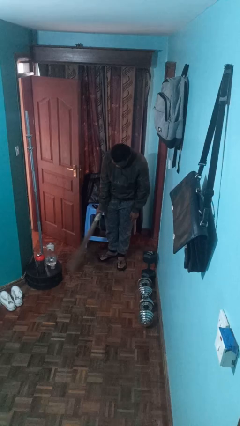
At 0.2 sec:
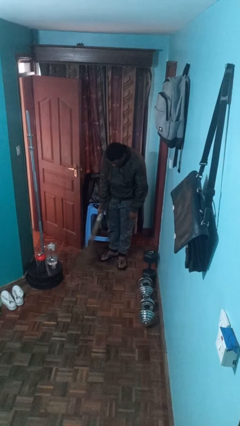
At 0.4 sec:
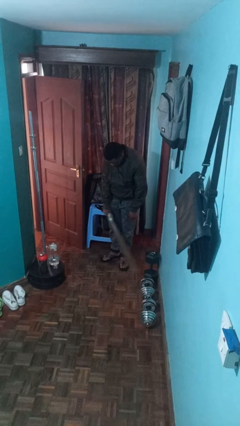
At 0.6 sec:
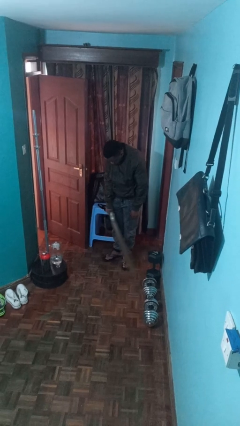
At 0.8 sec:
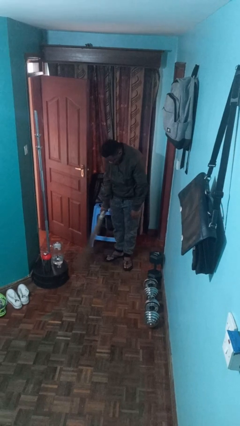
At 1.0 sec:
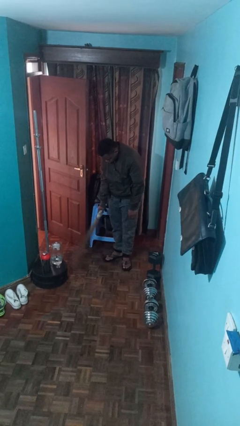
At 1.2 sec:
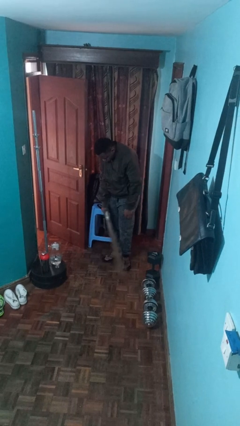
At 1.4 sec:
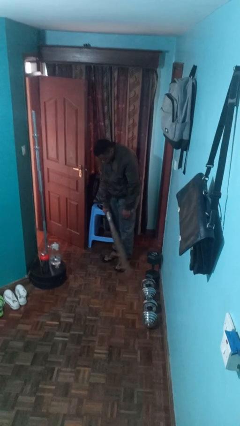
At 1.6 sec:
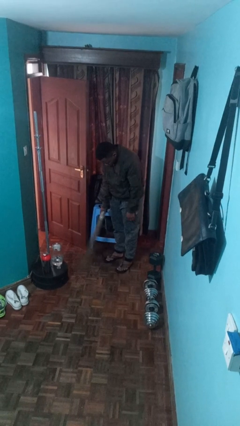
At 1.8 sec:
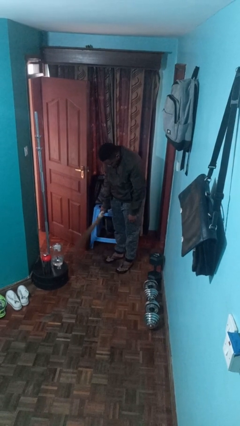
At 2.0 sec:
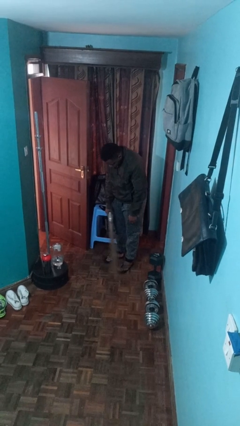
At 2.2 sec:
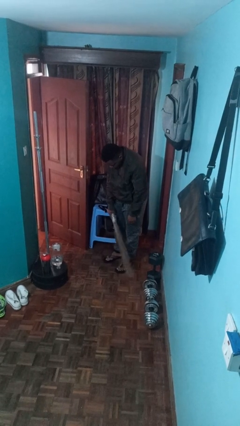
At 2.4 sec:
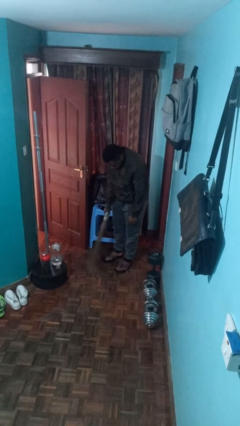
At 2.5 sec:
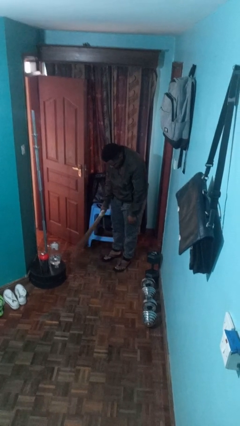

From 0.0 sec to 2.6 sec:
person sweeps floor

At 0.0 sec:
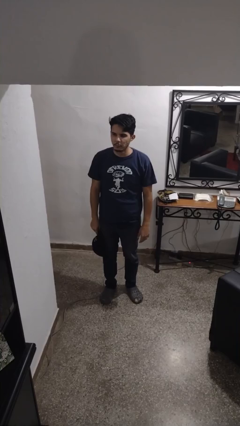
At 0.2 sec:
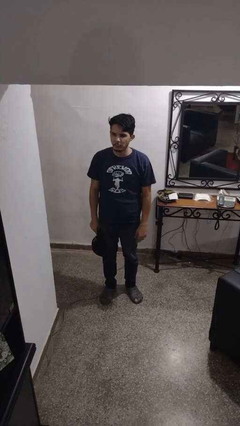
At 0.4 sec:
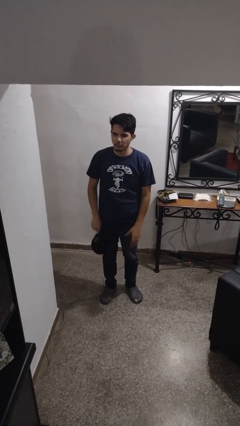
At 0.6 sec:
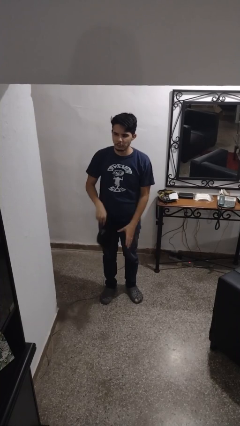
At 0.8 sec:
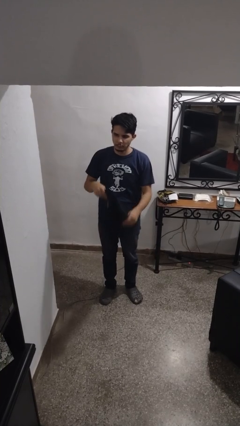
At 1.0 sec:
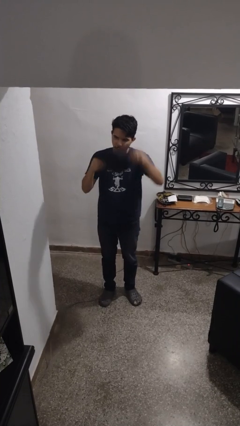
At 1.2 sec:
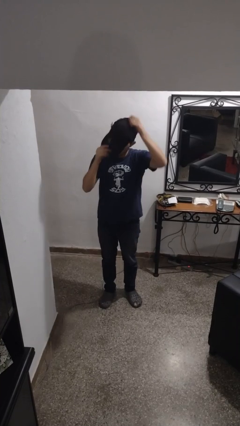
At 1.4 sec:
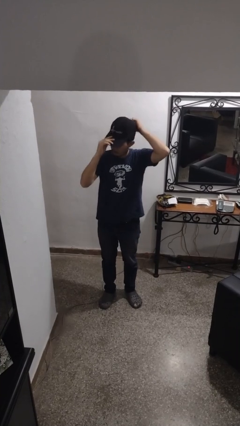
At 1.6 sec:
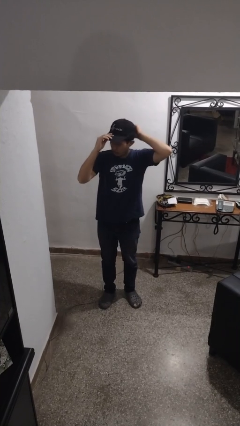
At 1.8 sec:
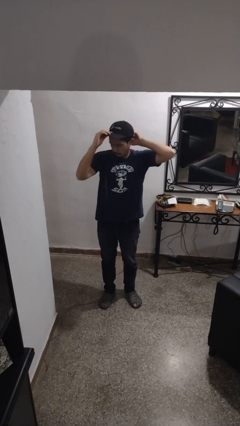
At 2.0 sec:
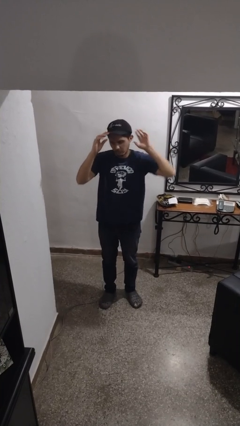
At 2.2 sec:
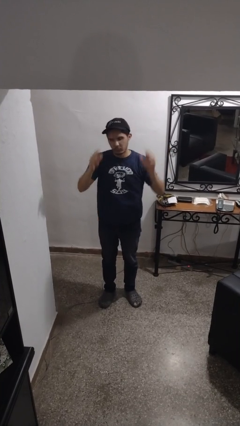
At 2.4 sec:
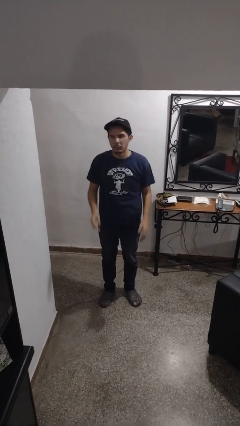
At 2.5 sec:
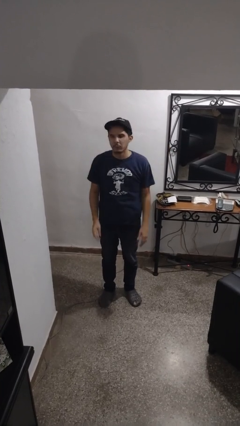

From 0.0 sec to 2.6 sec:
person puts on hat

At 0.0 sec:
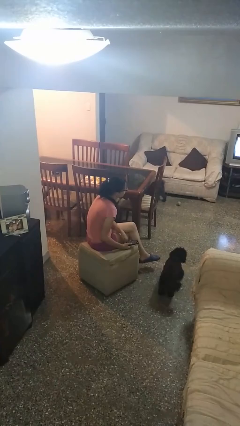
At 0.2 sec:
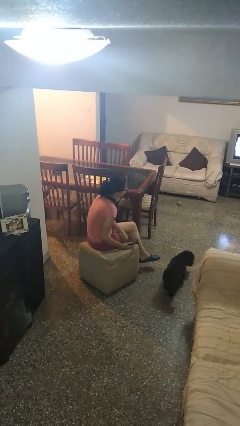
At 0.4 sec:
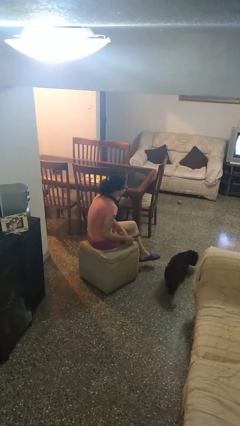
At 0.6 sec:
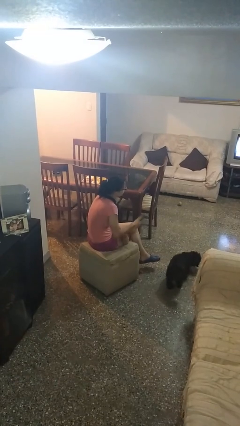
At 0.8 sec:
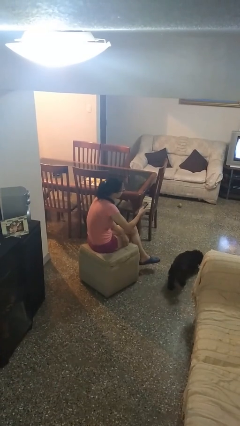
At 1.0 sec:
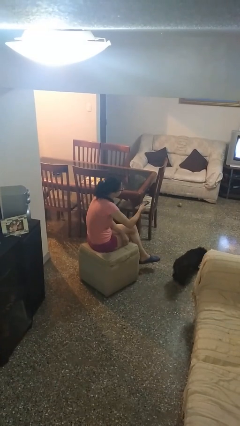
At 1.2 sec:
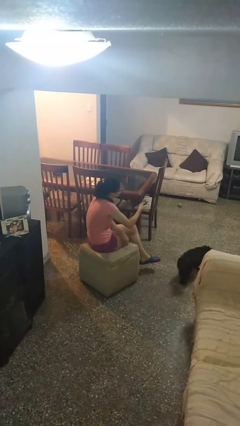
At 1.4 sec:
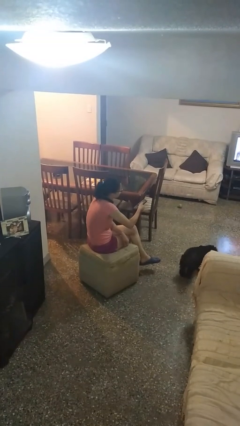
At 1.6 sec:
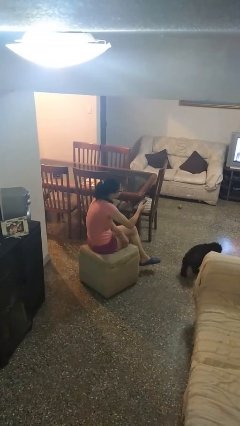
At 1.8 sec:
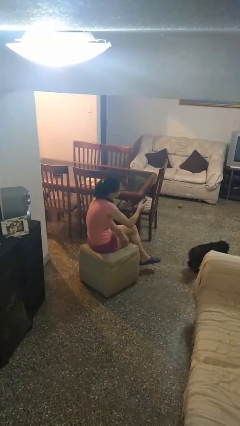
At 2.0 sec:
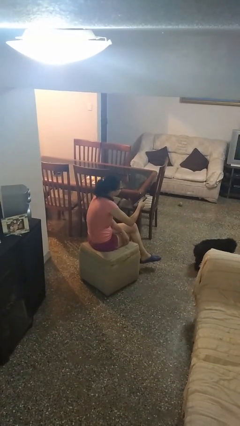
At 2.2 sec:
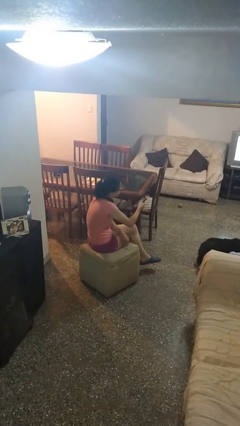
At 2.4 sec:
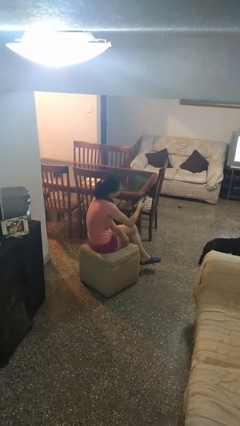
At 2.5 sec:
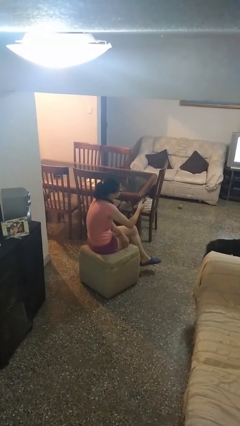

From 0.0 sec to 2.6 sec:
person uses television remote

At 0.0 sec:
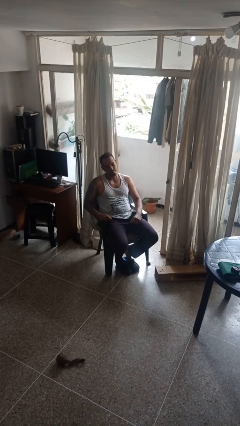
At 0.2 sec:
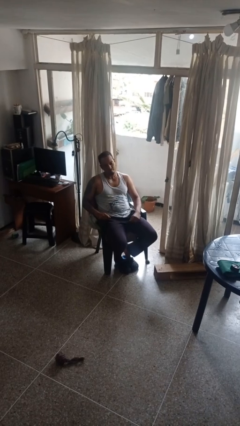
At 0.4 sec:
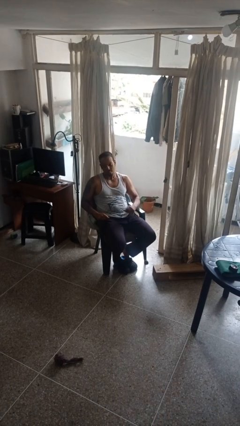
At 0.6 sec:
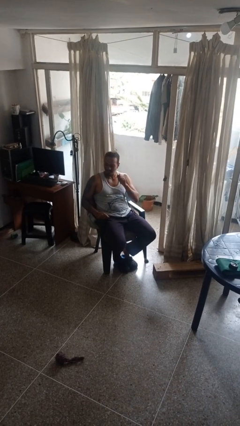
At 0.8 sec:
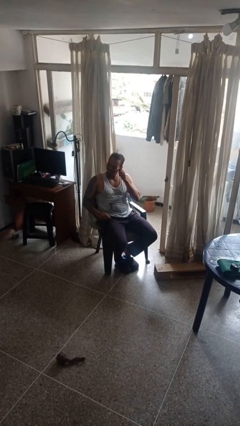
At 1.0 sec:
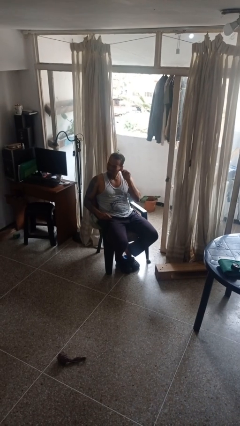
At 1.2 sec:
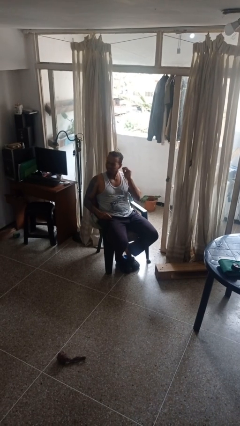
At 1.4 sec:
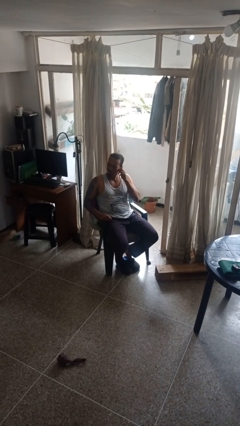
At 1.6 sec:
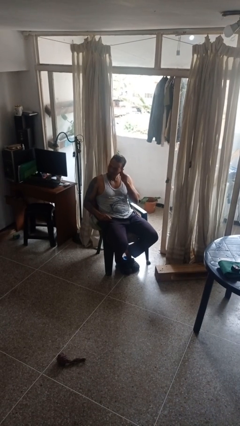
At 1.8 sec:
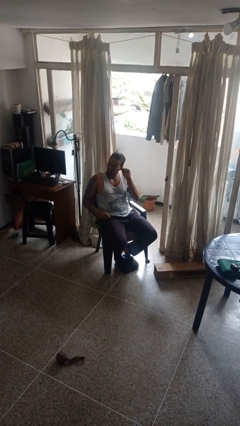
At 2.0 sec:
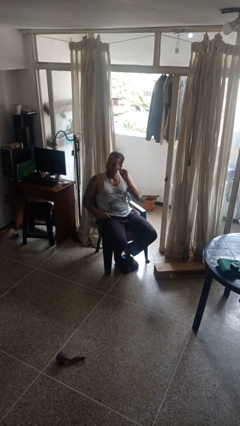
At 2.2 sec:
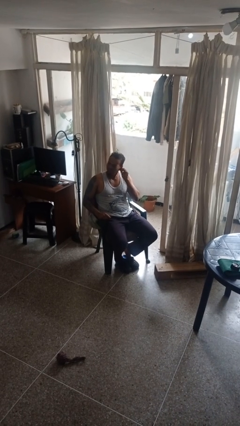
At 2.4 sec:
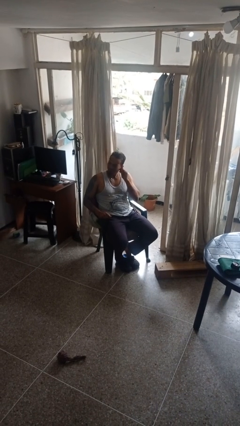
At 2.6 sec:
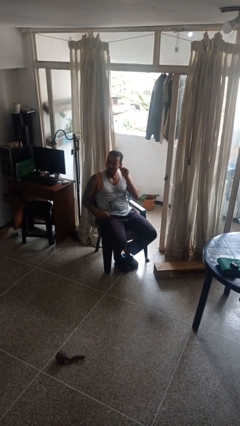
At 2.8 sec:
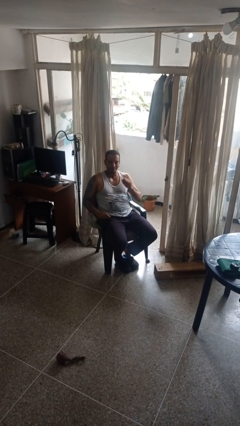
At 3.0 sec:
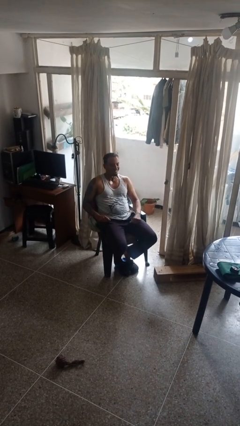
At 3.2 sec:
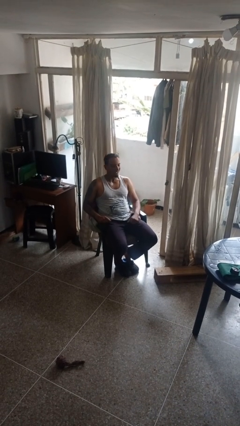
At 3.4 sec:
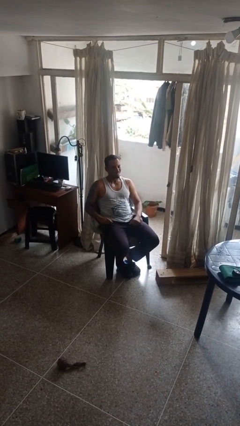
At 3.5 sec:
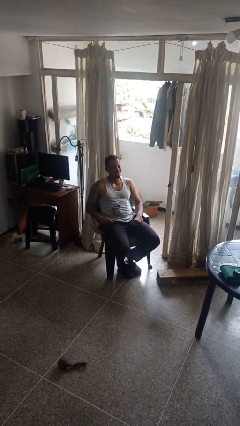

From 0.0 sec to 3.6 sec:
person touches earlobe

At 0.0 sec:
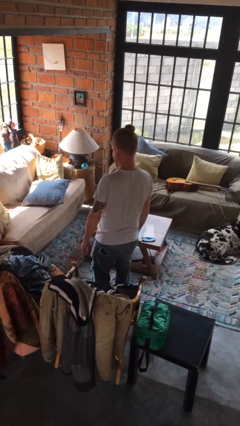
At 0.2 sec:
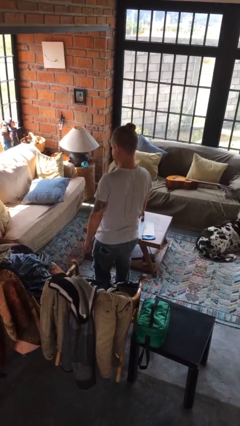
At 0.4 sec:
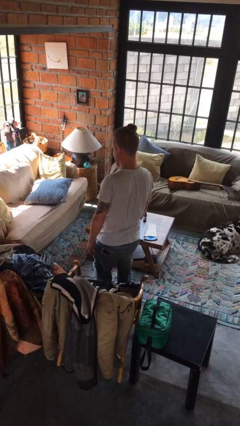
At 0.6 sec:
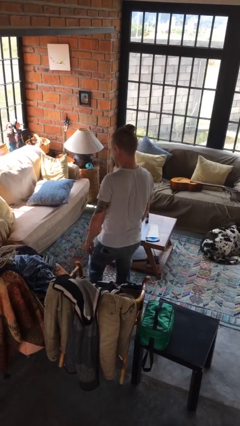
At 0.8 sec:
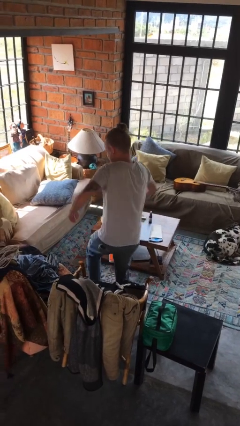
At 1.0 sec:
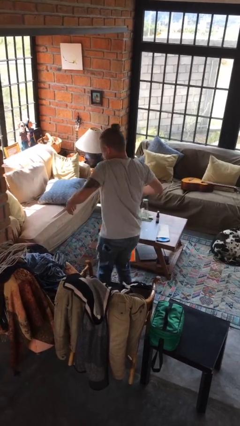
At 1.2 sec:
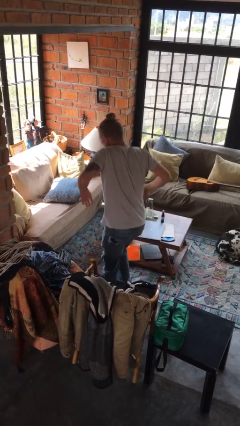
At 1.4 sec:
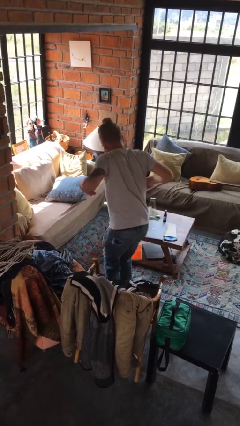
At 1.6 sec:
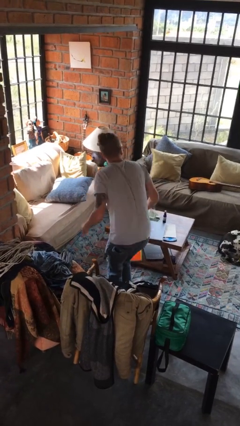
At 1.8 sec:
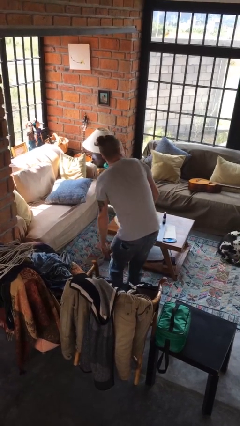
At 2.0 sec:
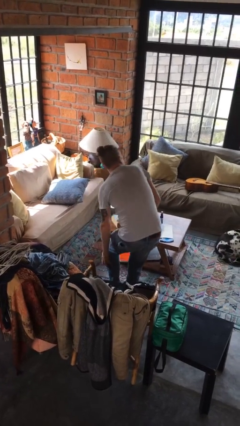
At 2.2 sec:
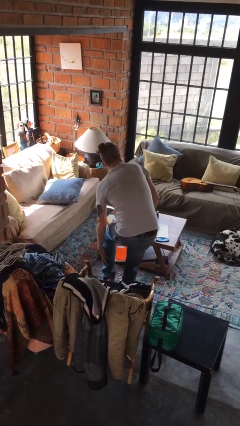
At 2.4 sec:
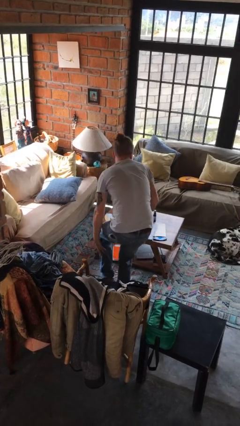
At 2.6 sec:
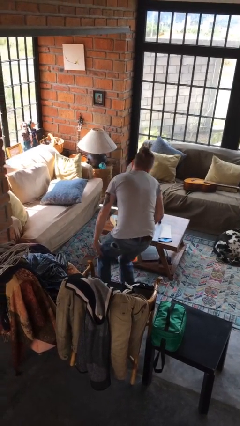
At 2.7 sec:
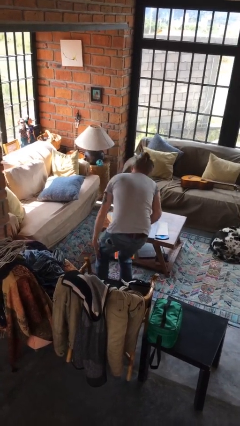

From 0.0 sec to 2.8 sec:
person stubs toe

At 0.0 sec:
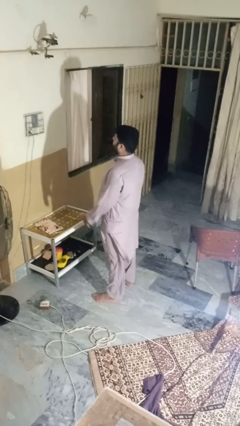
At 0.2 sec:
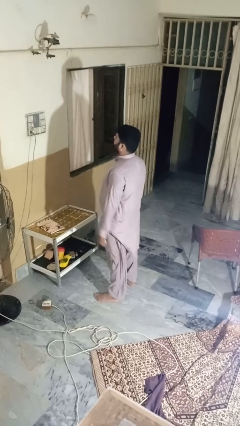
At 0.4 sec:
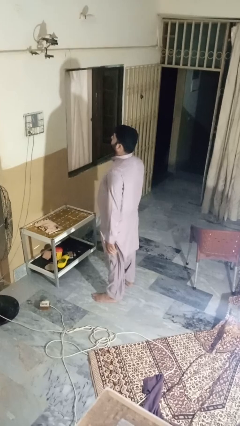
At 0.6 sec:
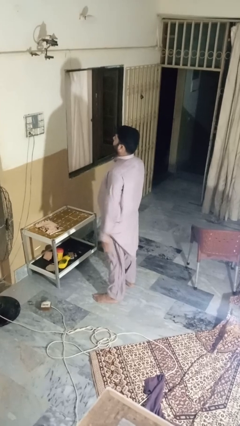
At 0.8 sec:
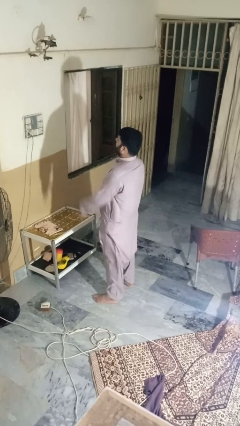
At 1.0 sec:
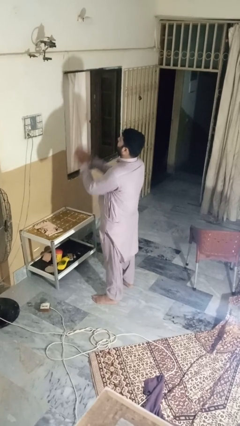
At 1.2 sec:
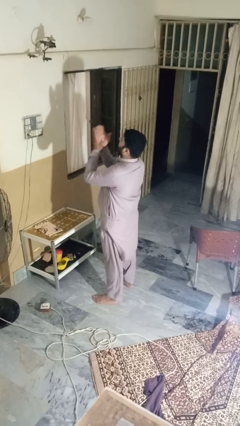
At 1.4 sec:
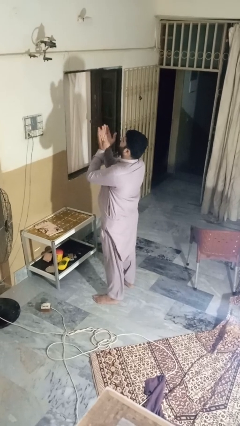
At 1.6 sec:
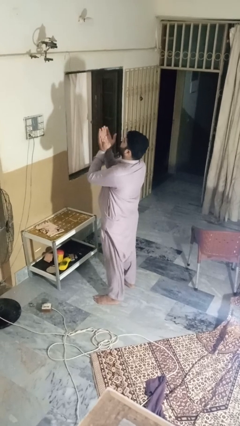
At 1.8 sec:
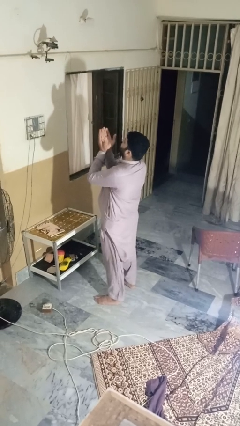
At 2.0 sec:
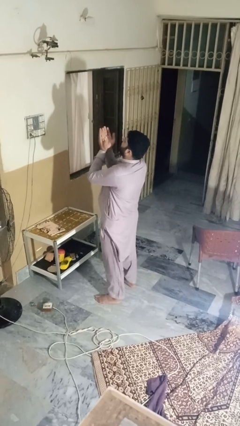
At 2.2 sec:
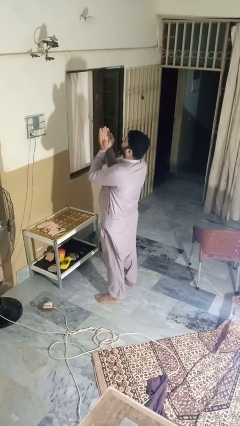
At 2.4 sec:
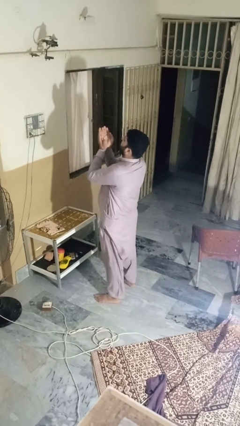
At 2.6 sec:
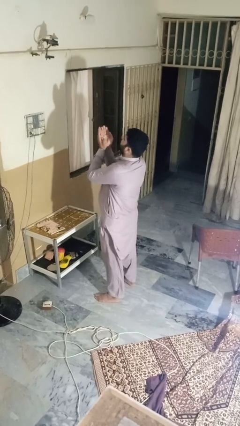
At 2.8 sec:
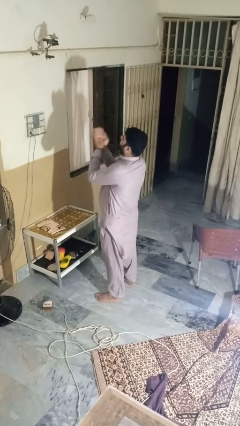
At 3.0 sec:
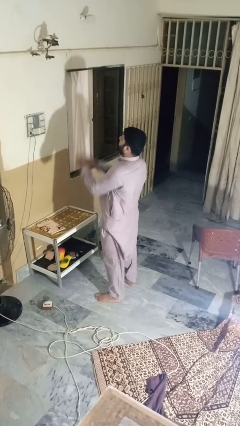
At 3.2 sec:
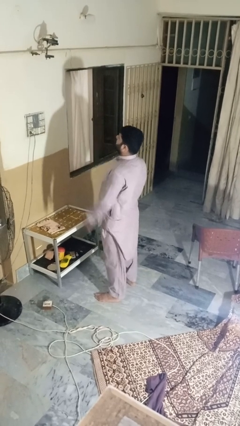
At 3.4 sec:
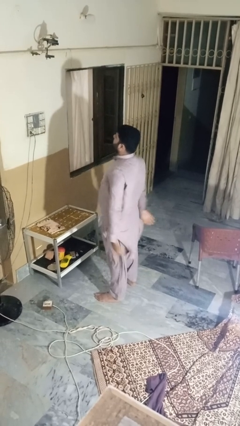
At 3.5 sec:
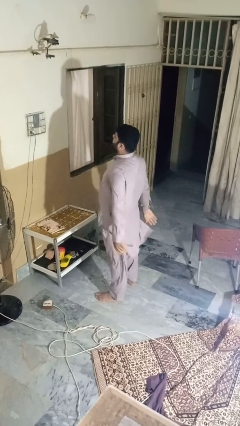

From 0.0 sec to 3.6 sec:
person prays
